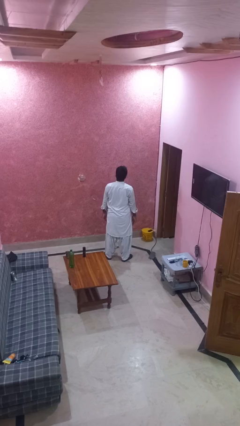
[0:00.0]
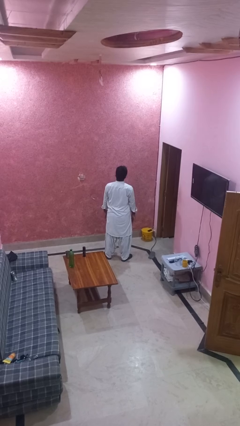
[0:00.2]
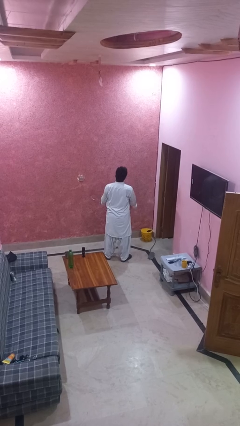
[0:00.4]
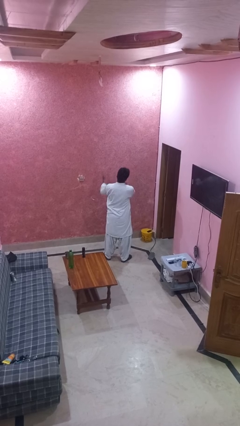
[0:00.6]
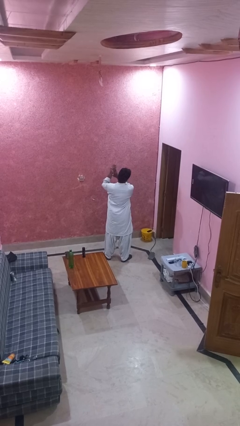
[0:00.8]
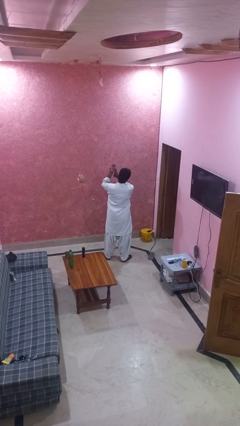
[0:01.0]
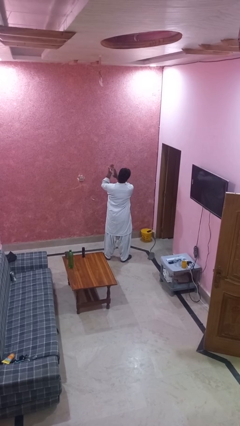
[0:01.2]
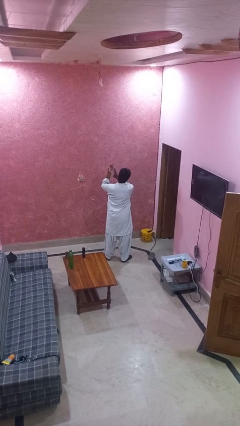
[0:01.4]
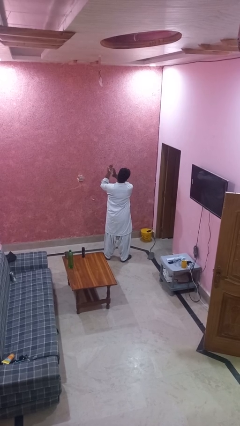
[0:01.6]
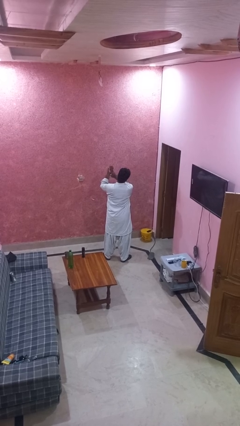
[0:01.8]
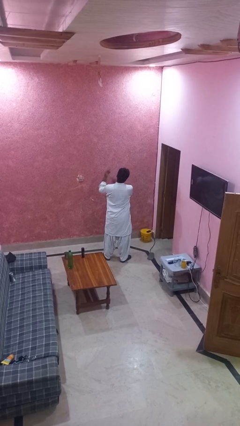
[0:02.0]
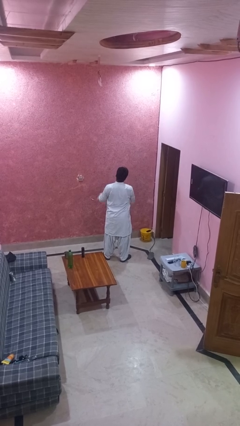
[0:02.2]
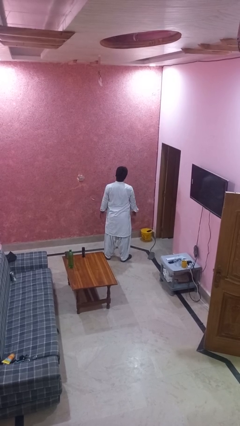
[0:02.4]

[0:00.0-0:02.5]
person claps hands

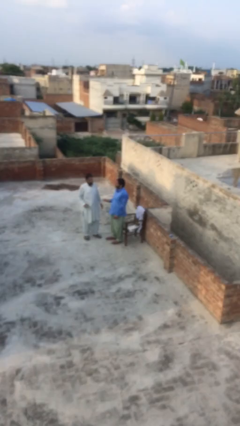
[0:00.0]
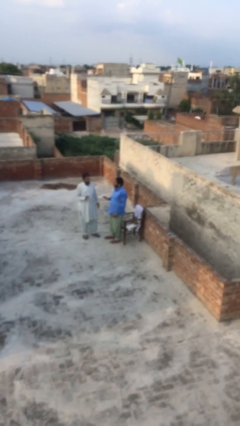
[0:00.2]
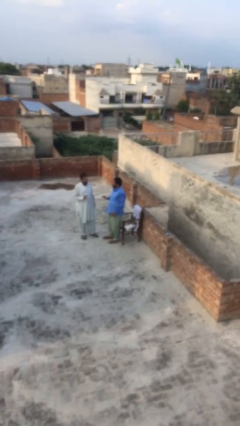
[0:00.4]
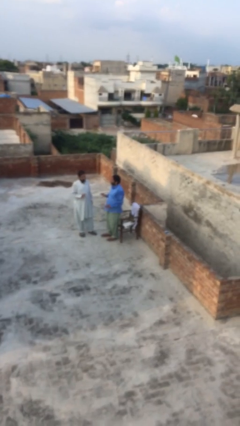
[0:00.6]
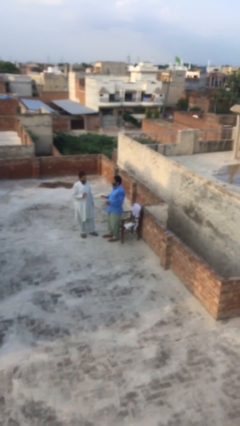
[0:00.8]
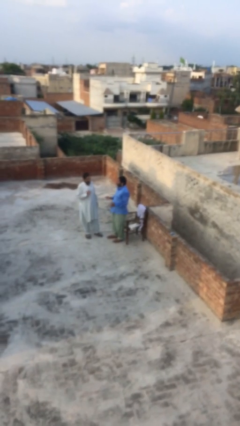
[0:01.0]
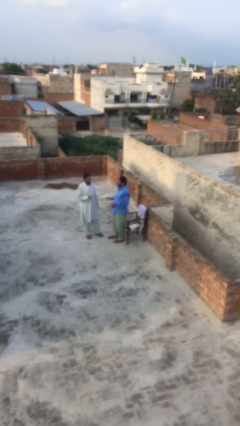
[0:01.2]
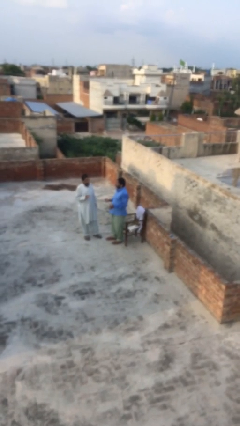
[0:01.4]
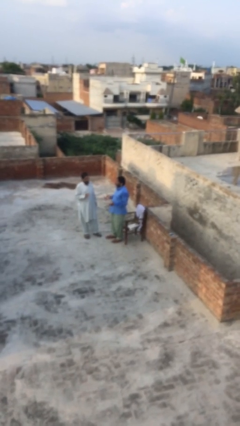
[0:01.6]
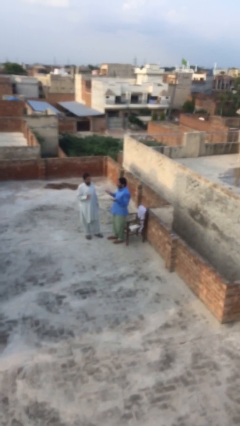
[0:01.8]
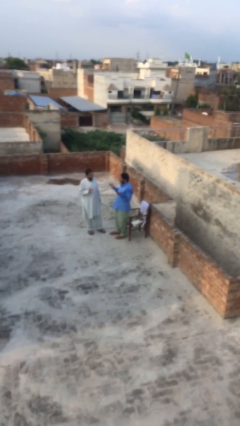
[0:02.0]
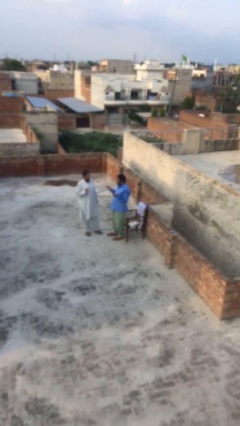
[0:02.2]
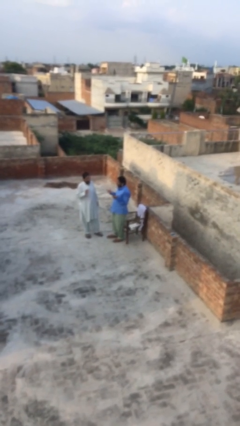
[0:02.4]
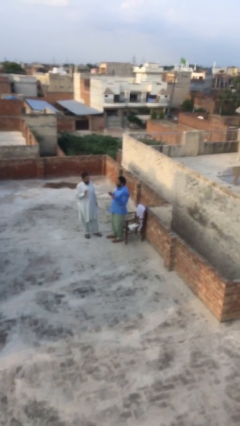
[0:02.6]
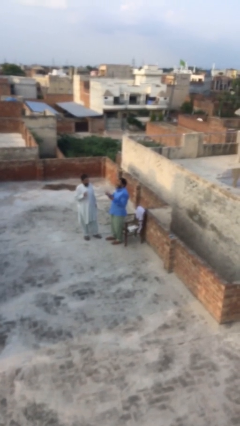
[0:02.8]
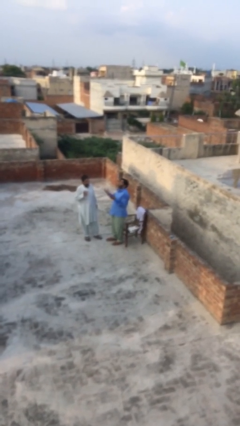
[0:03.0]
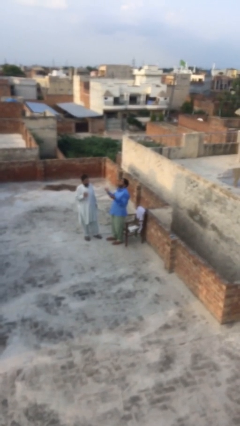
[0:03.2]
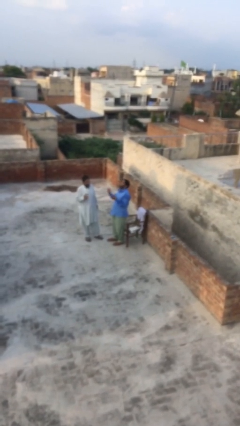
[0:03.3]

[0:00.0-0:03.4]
person talks to person

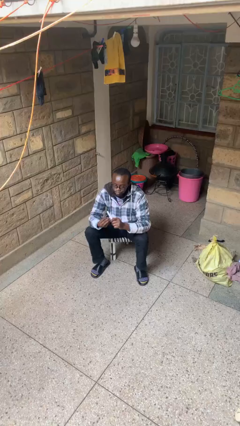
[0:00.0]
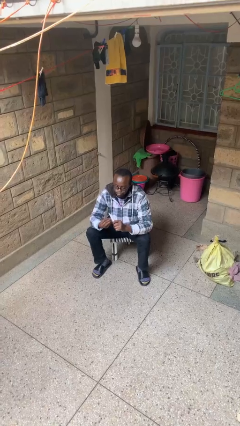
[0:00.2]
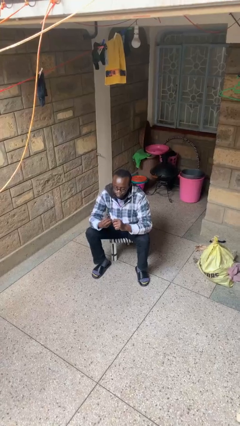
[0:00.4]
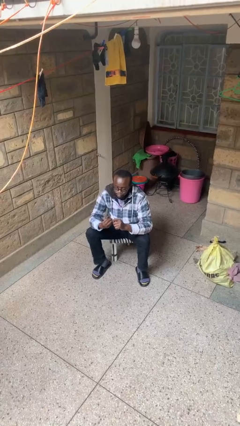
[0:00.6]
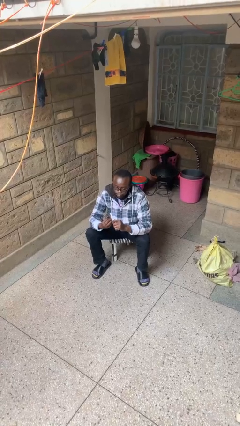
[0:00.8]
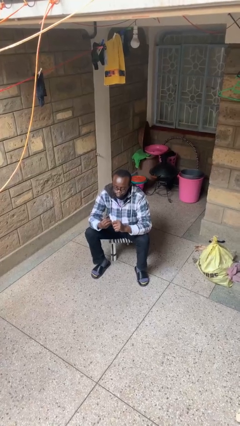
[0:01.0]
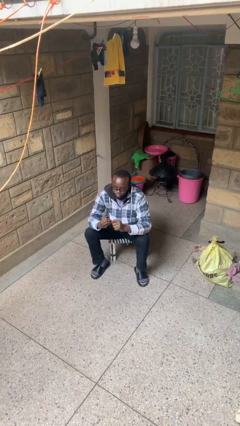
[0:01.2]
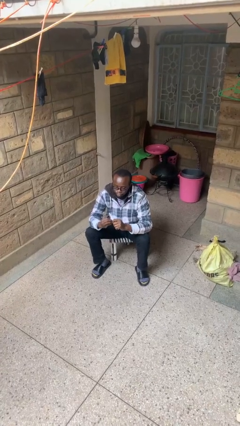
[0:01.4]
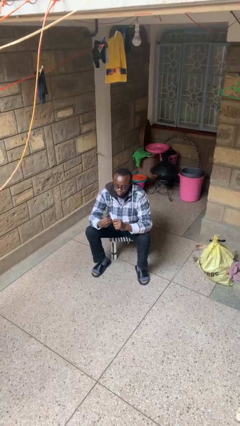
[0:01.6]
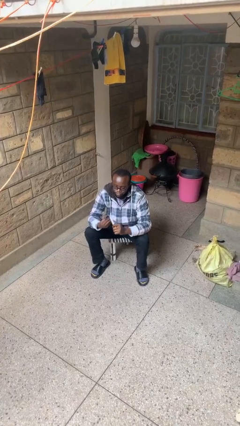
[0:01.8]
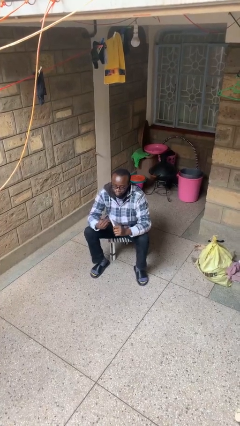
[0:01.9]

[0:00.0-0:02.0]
person files fingernails

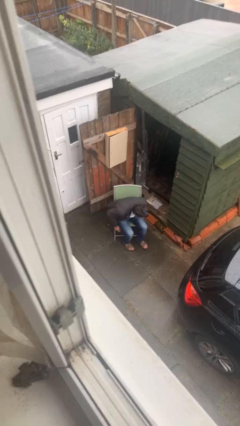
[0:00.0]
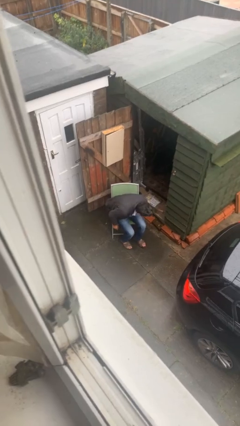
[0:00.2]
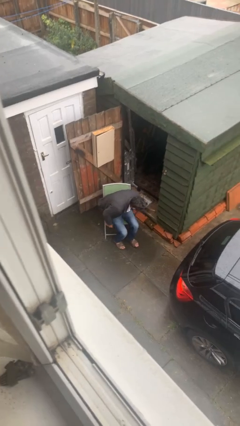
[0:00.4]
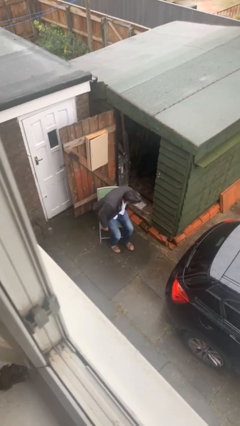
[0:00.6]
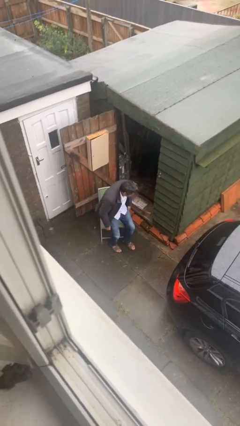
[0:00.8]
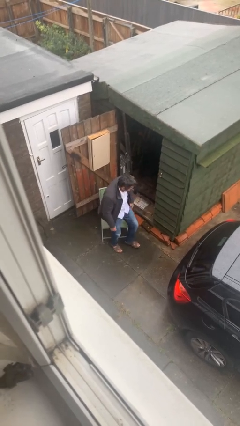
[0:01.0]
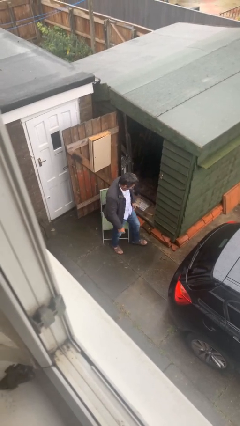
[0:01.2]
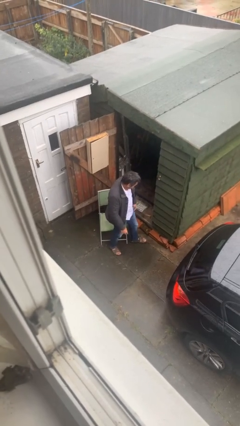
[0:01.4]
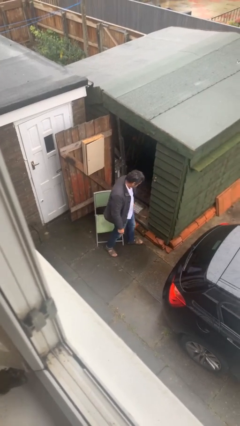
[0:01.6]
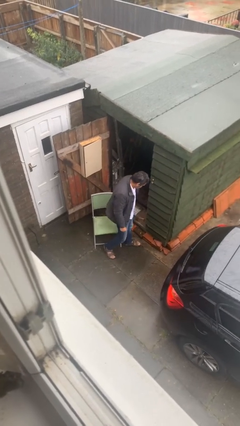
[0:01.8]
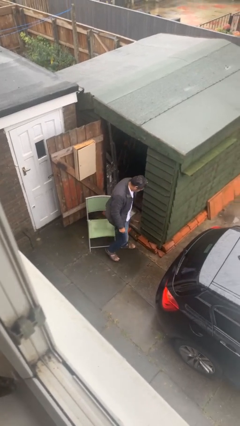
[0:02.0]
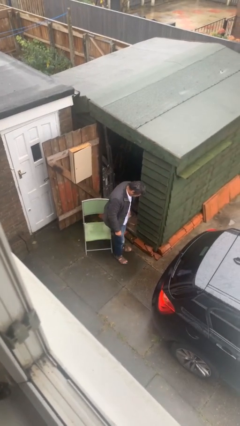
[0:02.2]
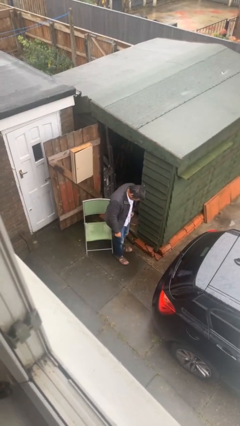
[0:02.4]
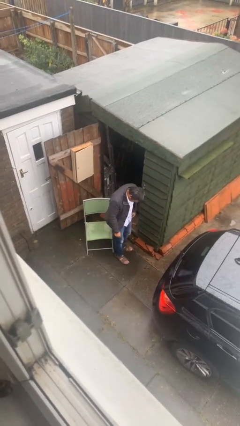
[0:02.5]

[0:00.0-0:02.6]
person stands up

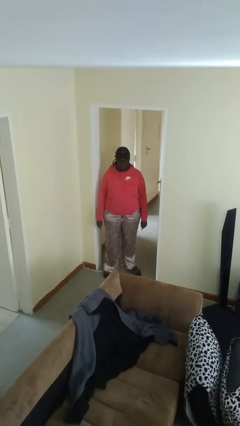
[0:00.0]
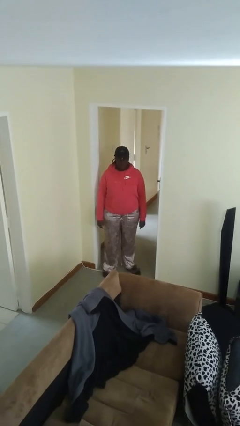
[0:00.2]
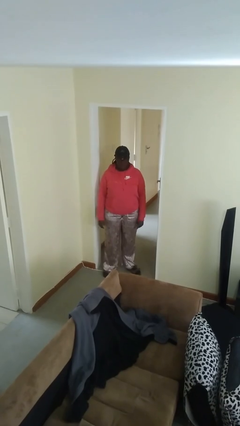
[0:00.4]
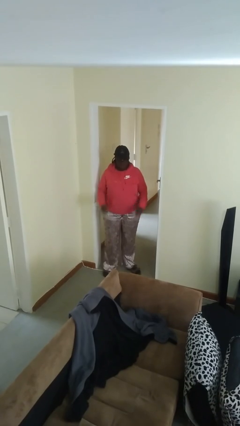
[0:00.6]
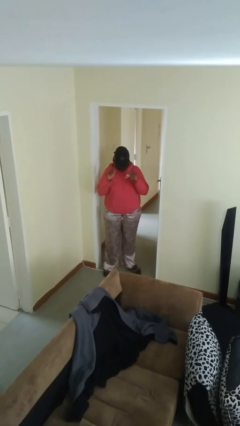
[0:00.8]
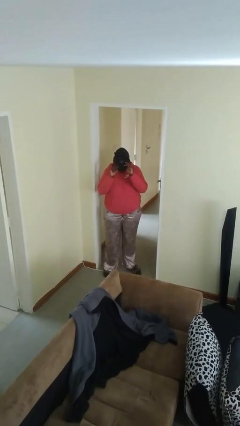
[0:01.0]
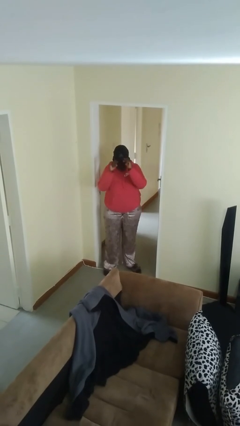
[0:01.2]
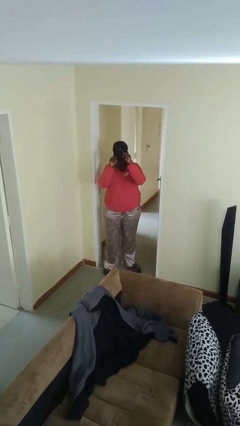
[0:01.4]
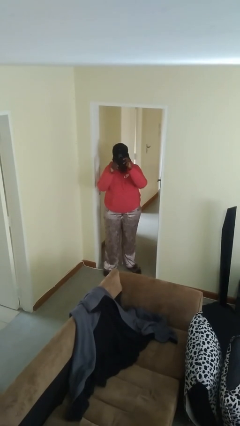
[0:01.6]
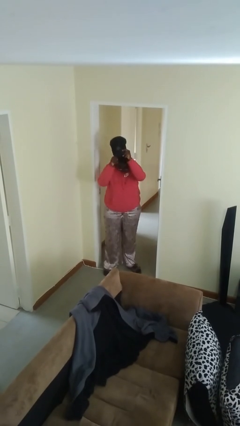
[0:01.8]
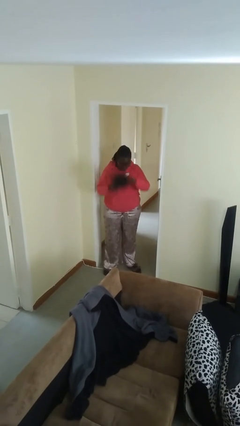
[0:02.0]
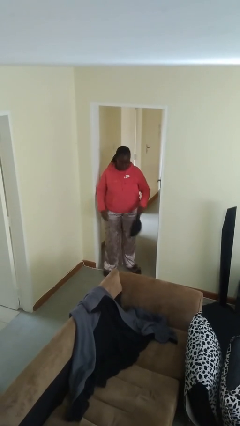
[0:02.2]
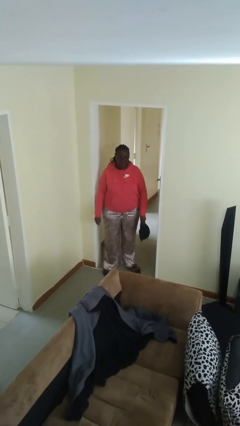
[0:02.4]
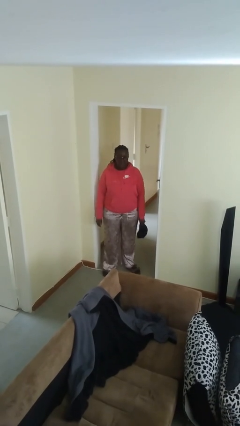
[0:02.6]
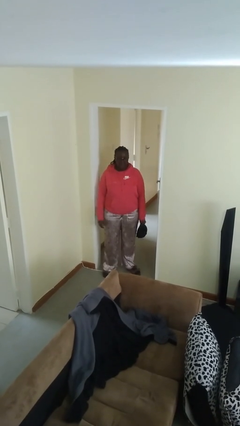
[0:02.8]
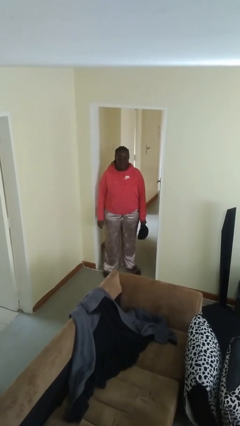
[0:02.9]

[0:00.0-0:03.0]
person takes off hat

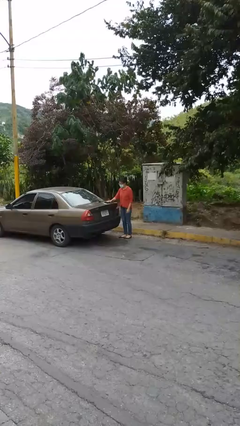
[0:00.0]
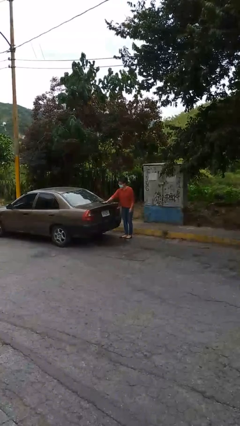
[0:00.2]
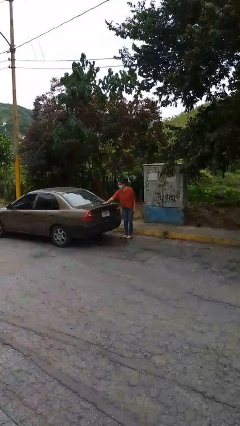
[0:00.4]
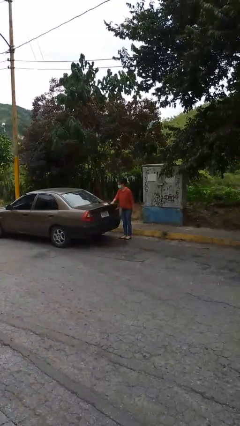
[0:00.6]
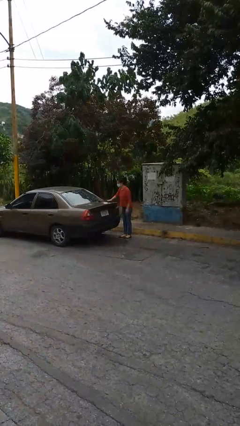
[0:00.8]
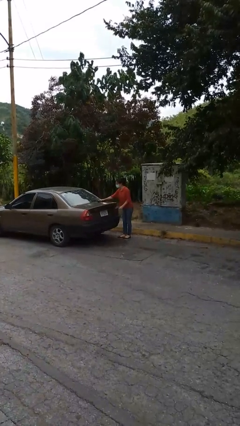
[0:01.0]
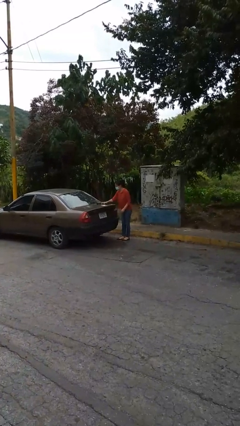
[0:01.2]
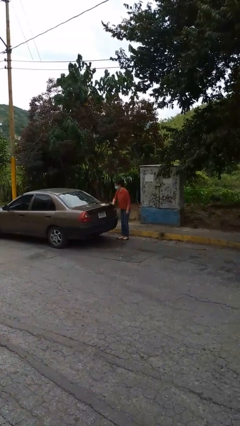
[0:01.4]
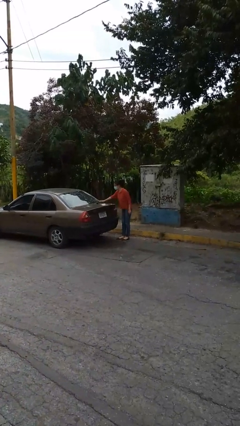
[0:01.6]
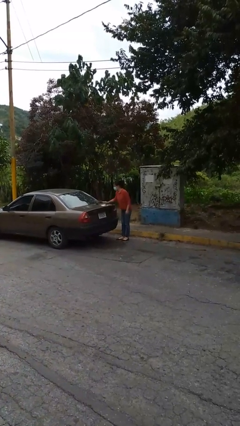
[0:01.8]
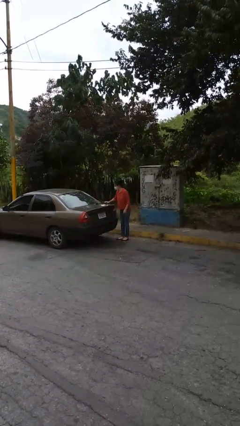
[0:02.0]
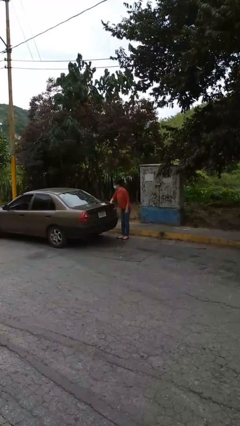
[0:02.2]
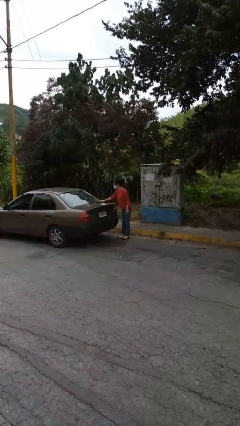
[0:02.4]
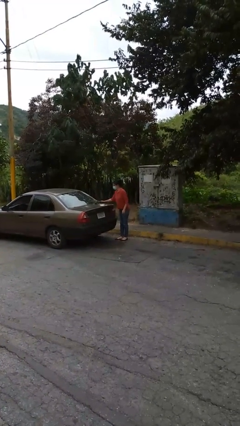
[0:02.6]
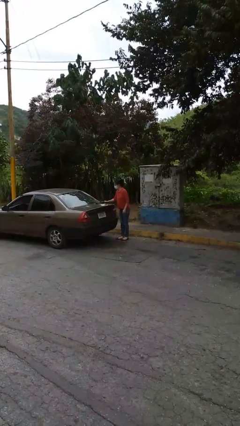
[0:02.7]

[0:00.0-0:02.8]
person polishes car with rag

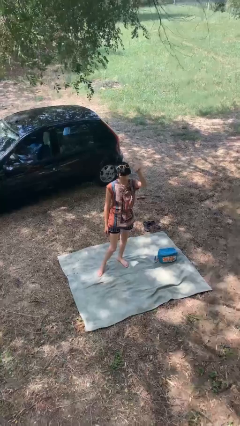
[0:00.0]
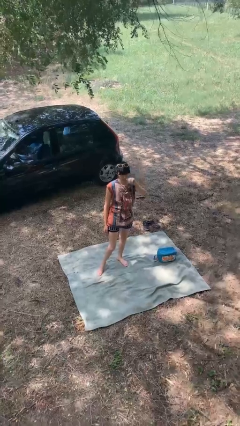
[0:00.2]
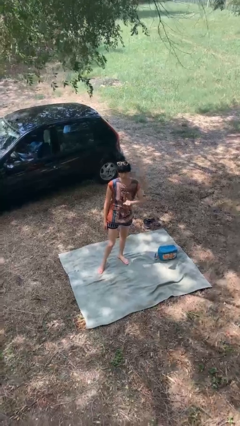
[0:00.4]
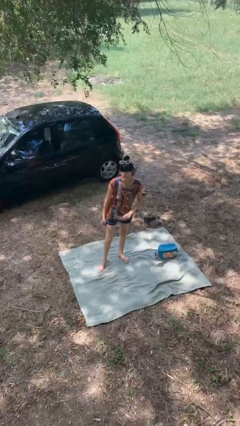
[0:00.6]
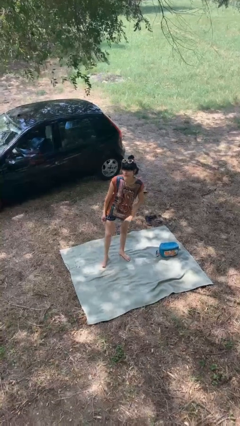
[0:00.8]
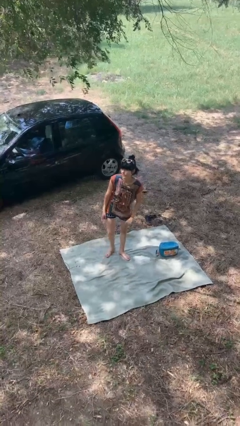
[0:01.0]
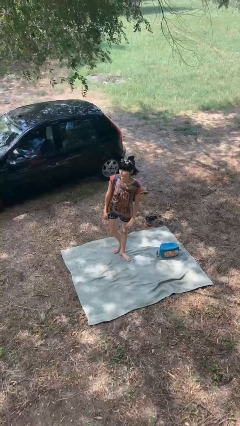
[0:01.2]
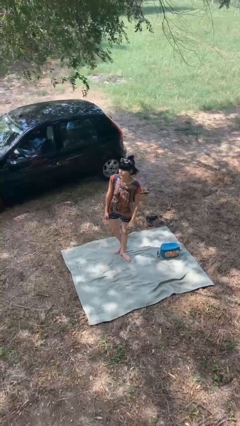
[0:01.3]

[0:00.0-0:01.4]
person gestures lower hand
